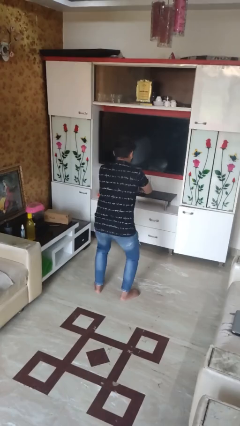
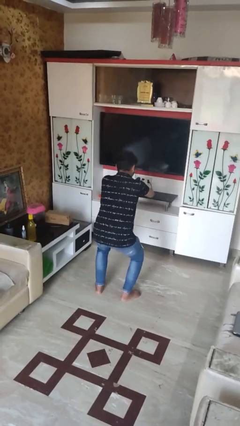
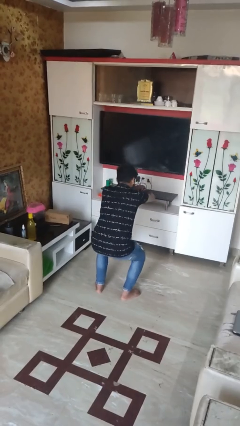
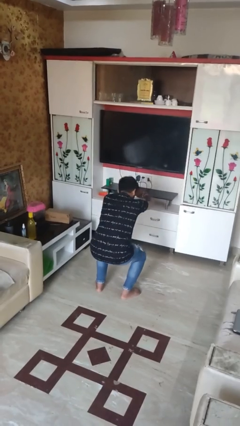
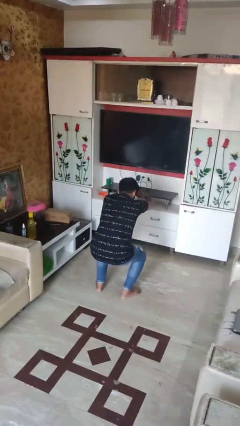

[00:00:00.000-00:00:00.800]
person squats

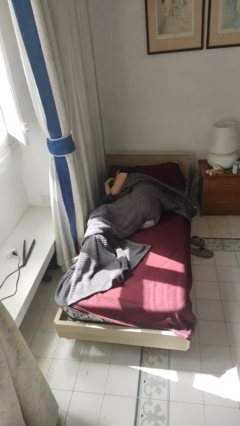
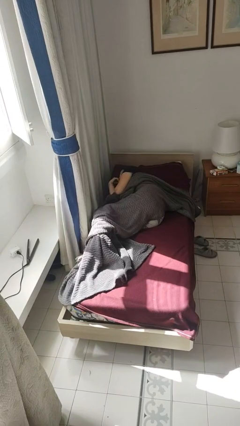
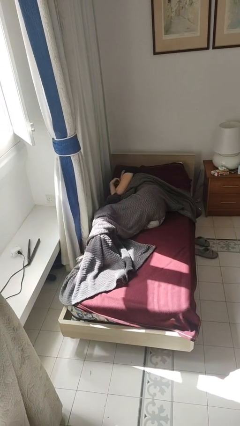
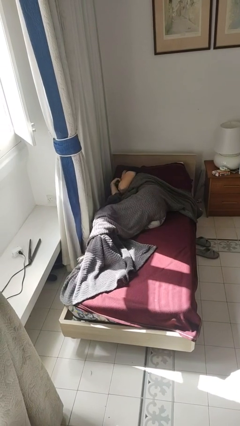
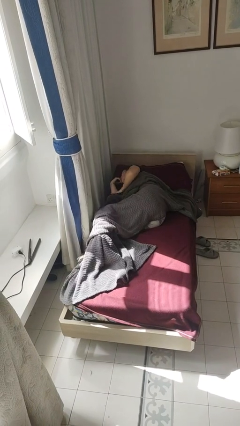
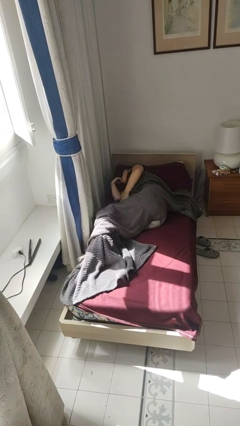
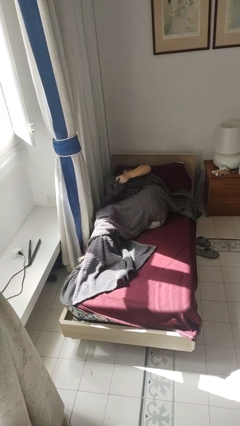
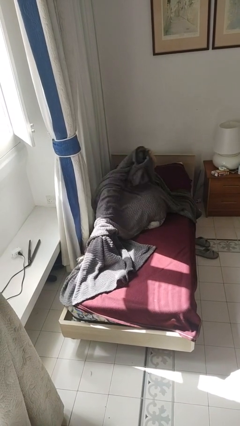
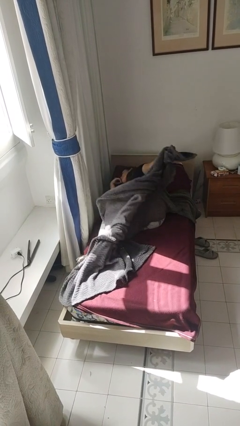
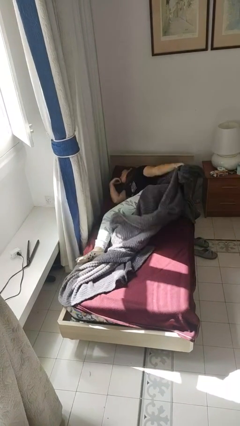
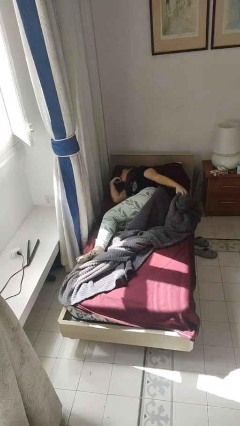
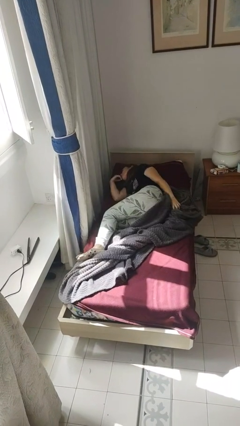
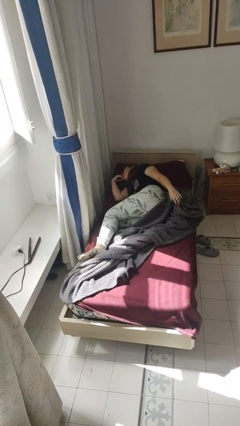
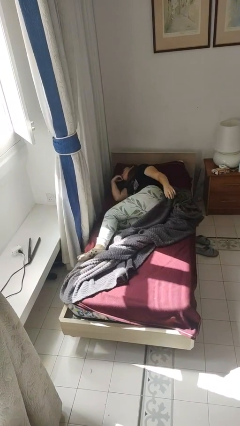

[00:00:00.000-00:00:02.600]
person uncovers with bedsheets

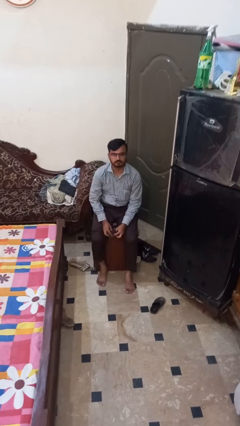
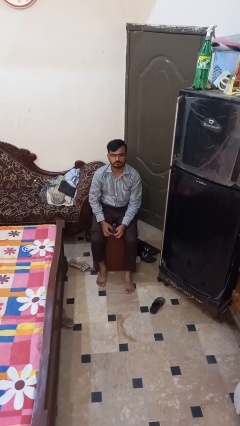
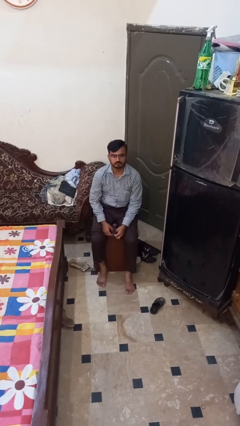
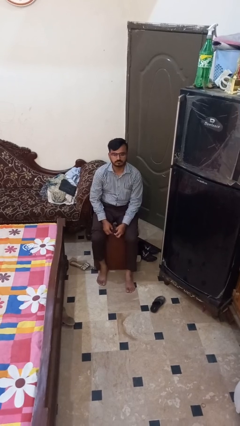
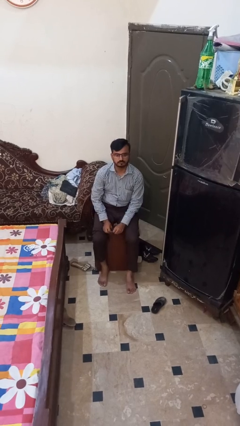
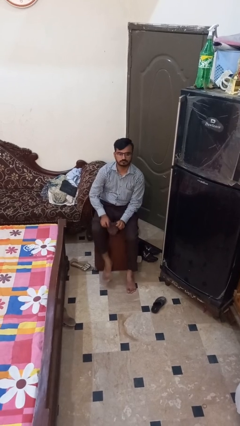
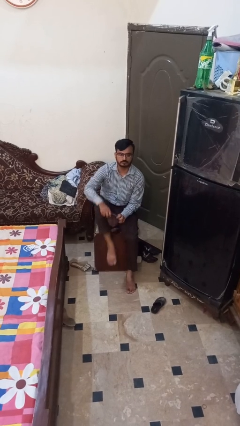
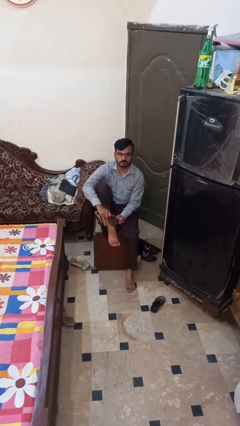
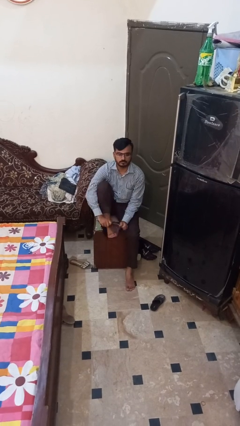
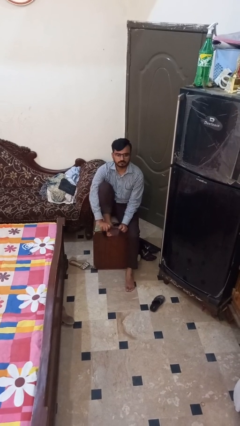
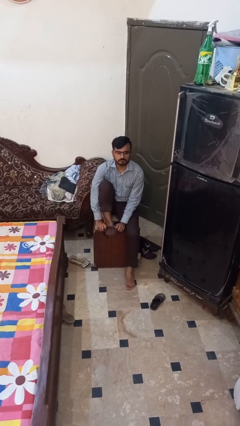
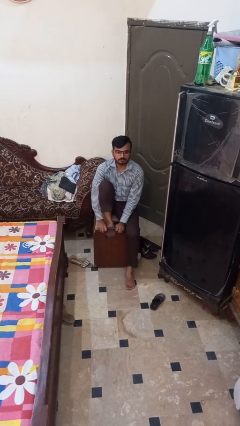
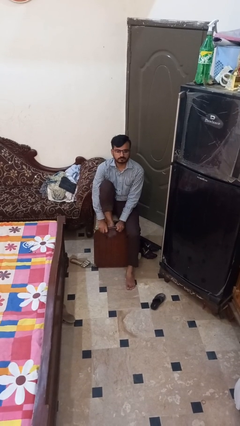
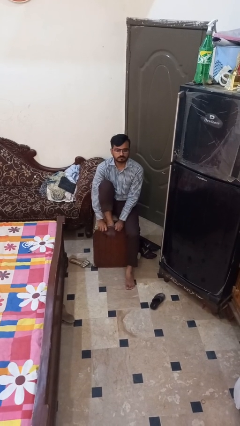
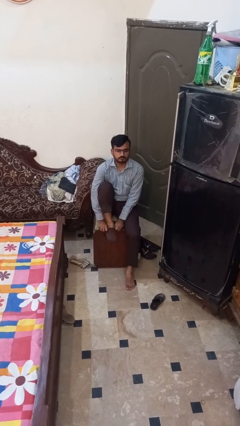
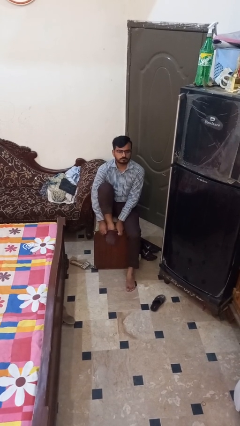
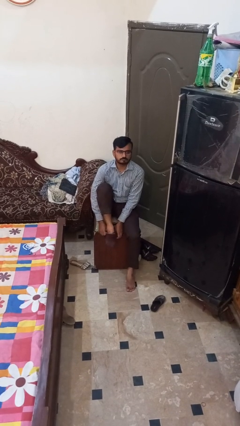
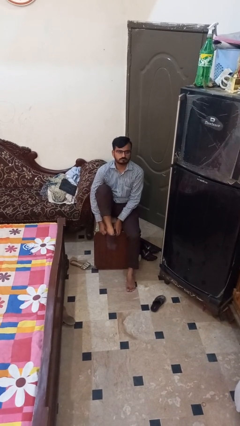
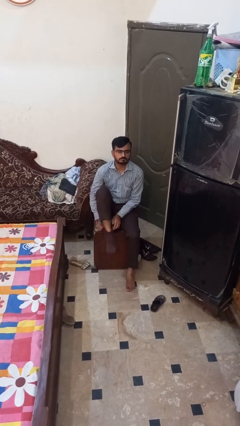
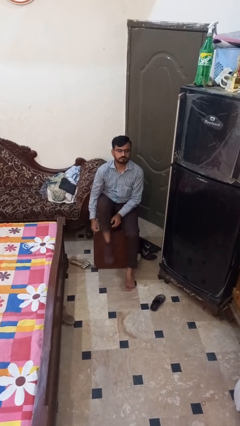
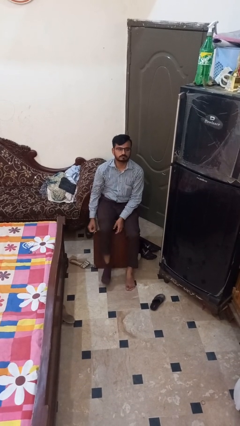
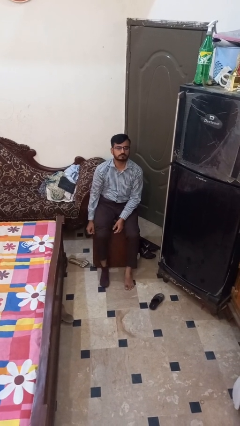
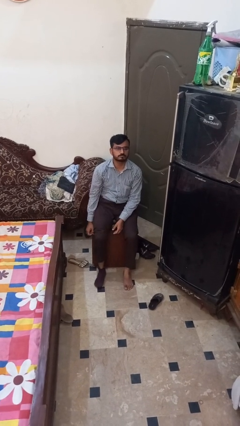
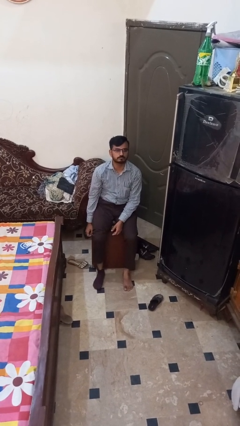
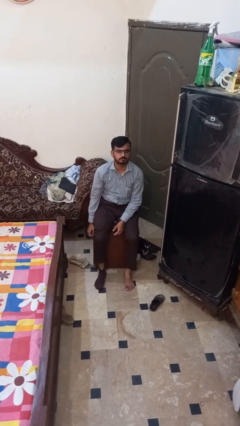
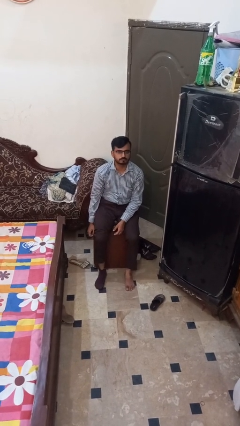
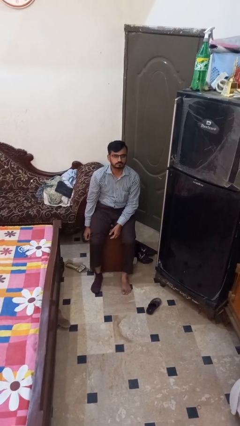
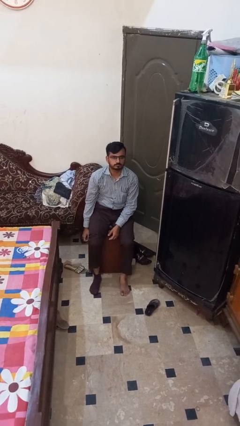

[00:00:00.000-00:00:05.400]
person puts on socks

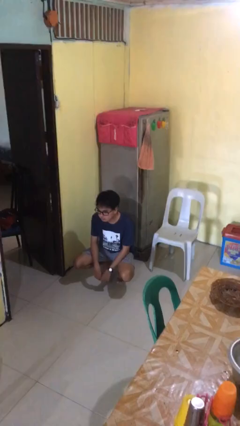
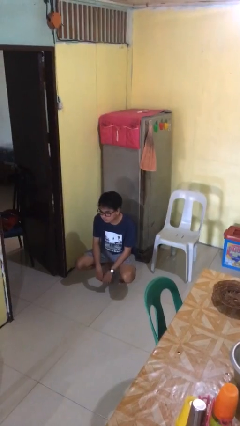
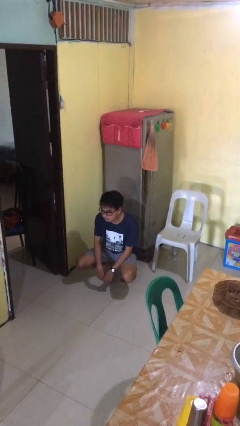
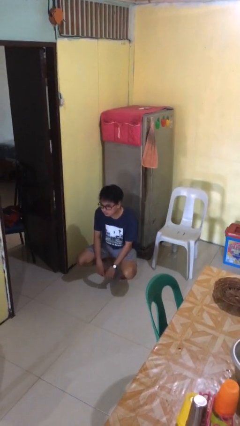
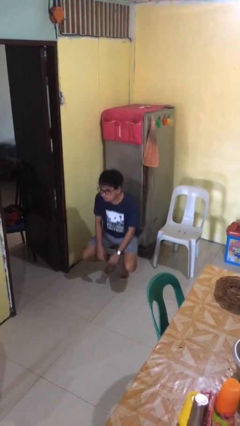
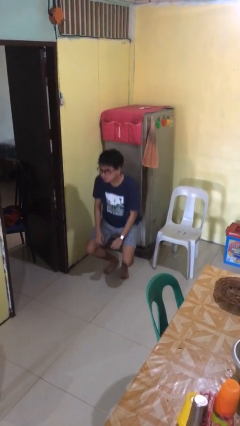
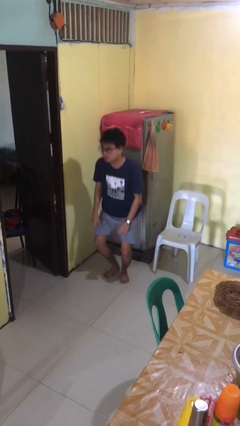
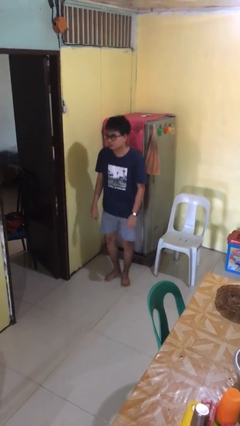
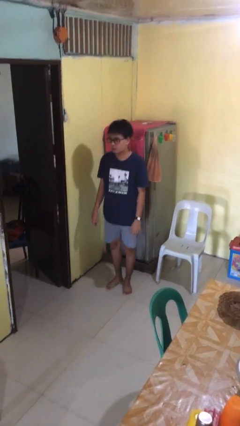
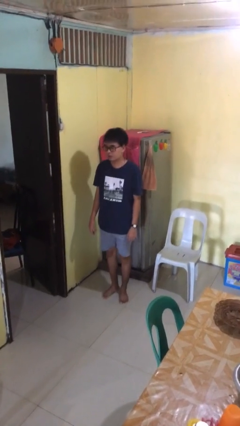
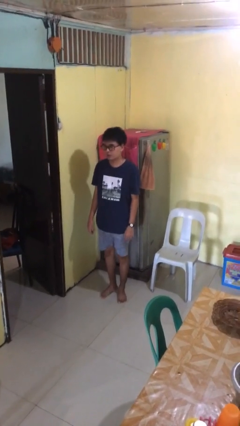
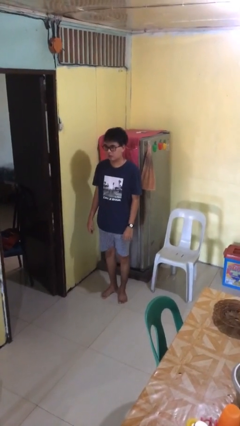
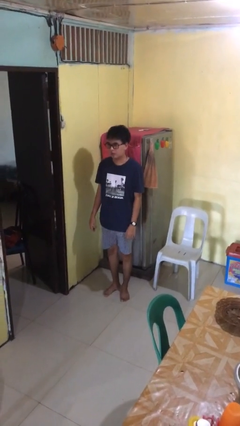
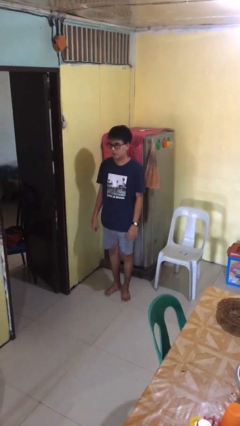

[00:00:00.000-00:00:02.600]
person stands up

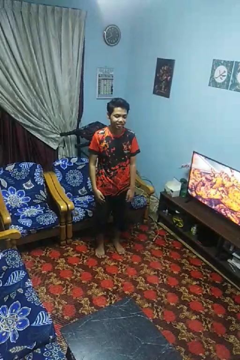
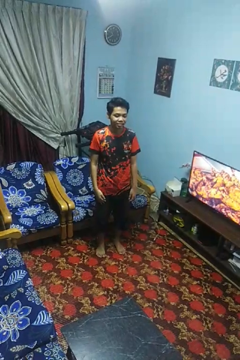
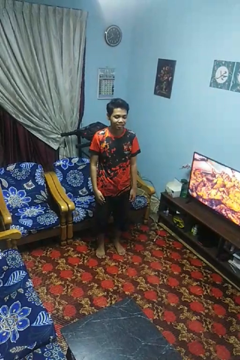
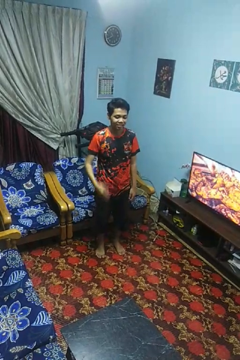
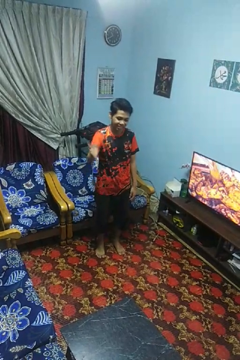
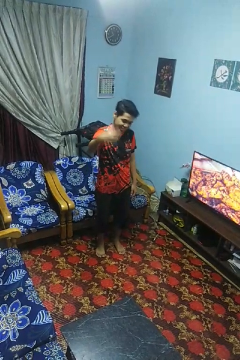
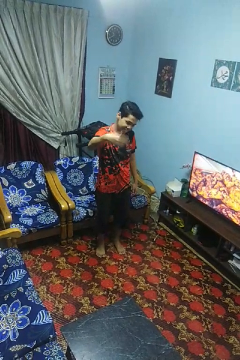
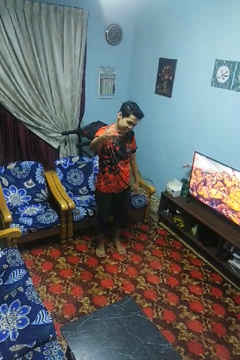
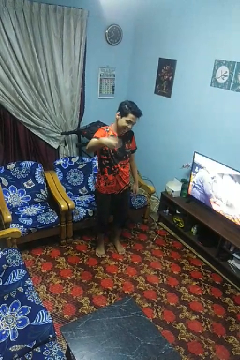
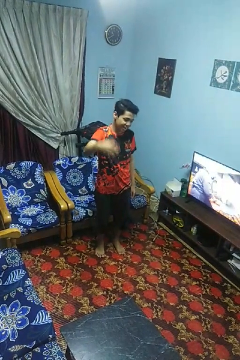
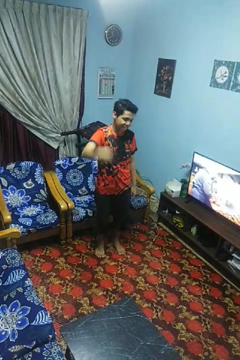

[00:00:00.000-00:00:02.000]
person gestures come here

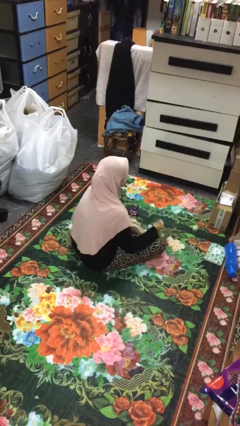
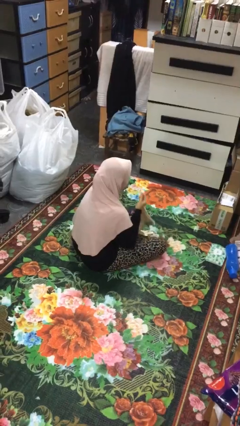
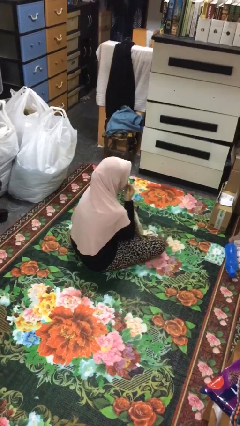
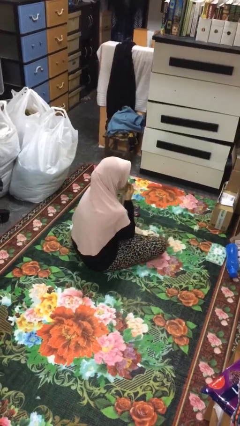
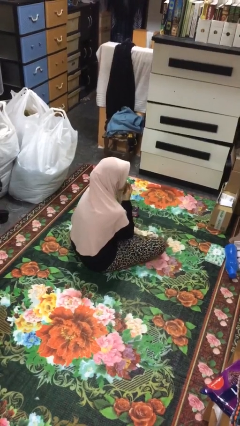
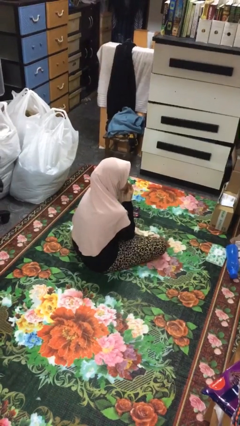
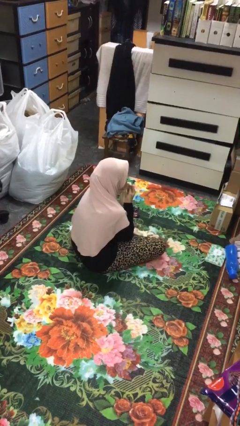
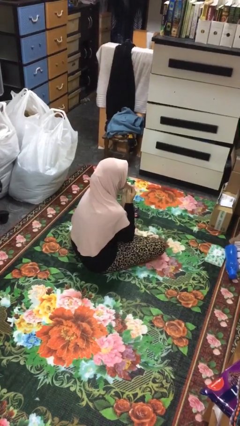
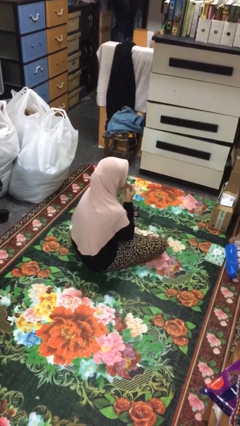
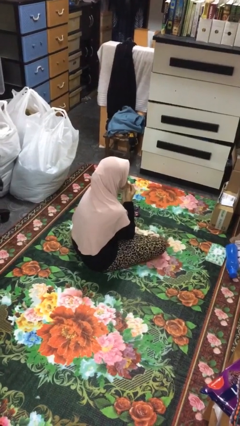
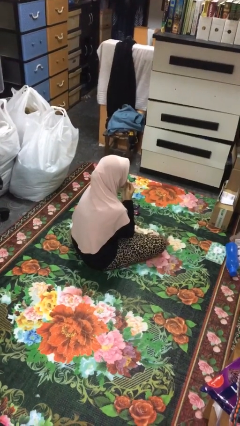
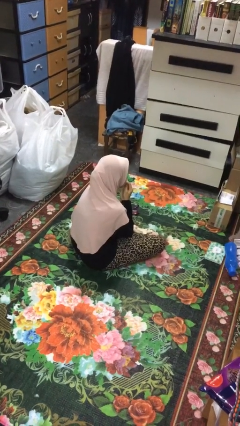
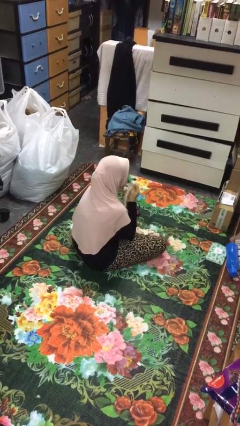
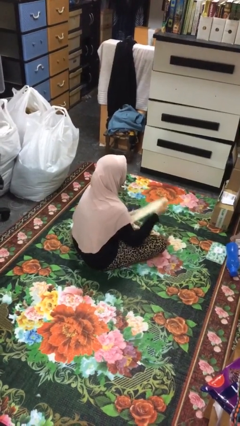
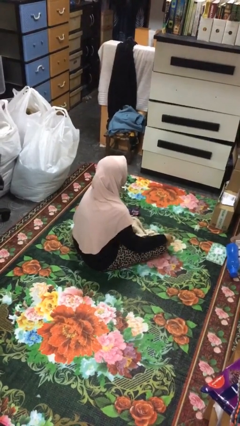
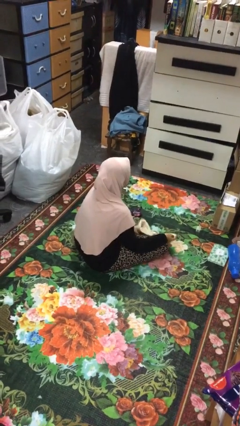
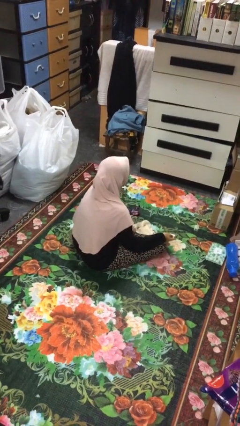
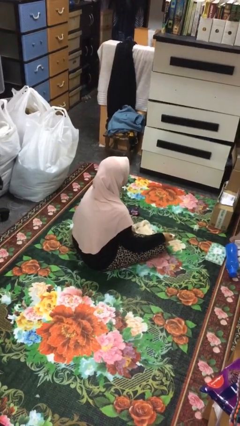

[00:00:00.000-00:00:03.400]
person wipes mouth with napkin

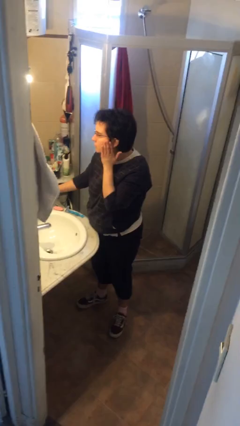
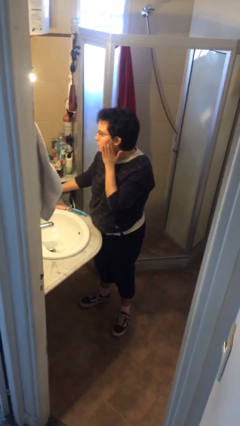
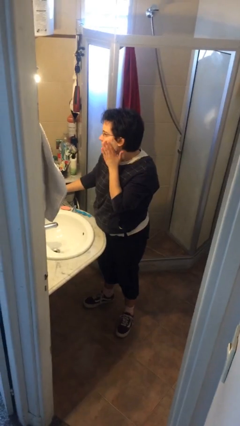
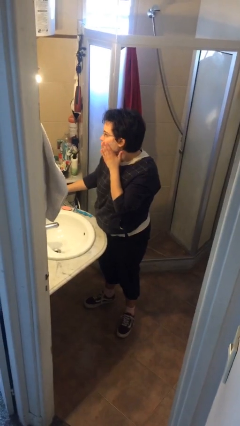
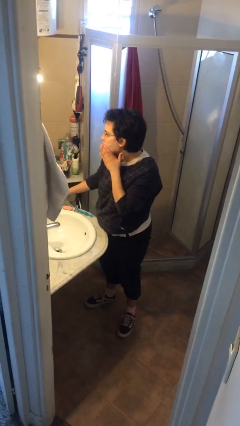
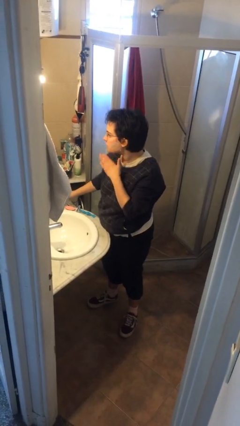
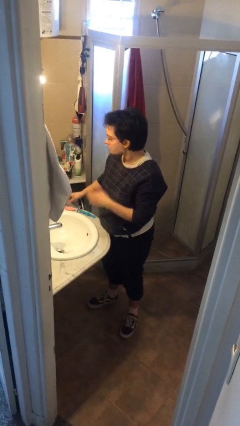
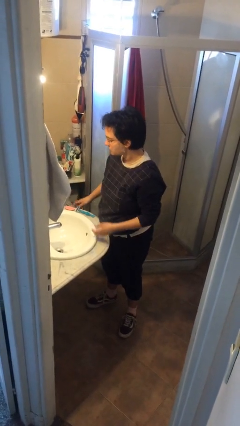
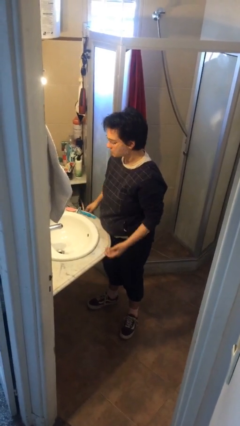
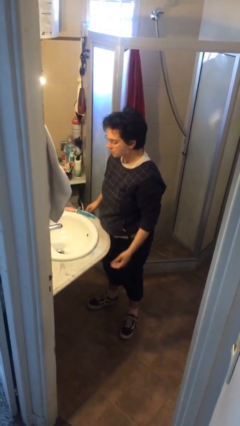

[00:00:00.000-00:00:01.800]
person applies shaving cream
